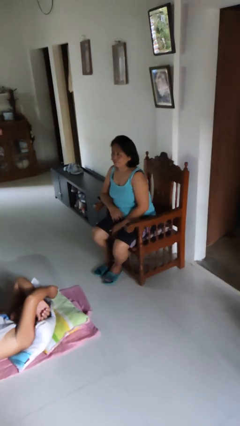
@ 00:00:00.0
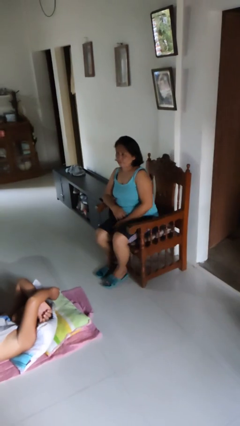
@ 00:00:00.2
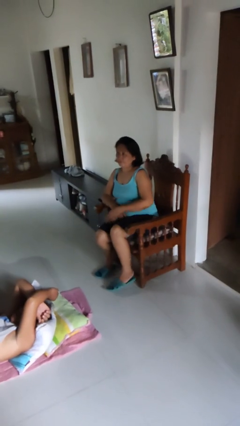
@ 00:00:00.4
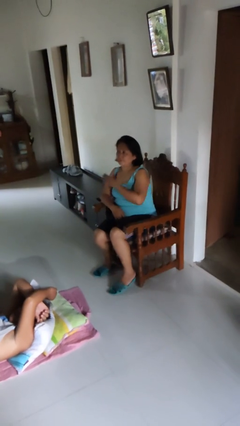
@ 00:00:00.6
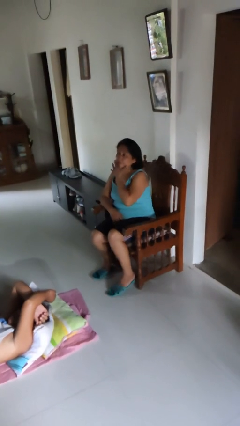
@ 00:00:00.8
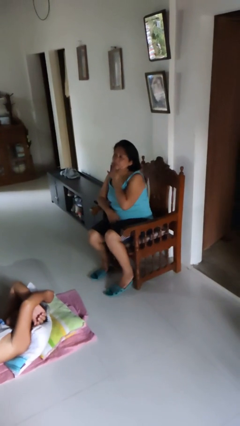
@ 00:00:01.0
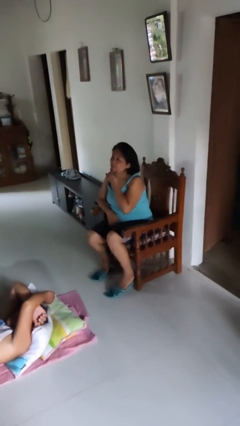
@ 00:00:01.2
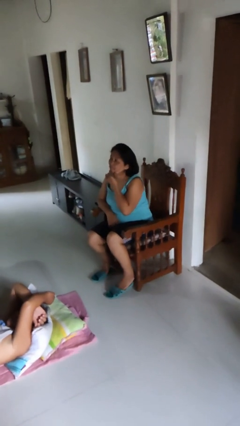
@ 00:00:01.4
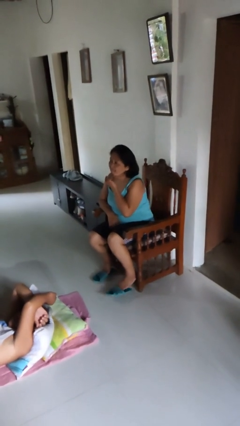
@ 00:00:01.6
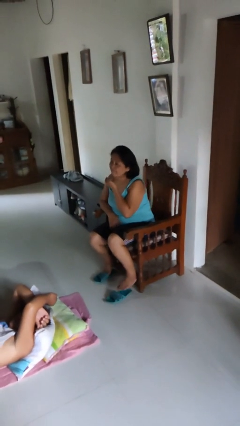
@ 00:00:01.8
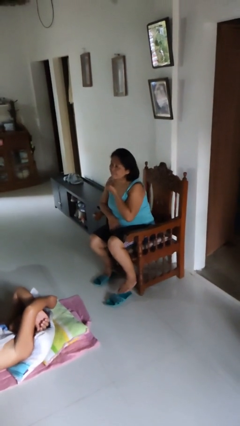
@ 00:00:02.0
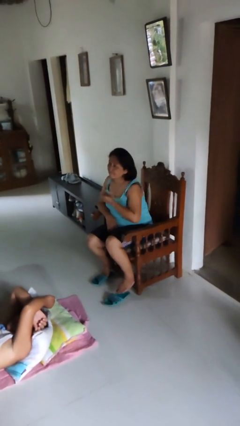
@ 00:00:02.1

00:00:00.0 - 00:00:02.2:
person strokes chin

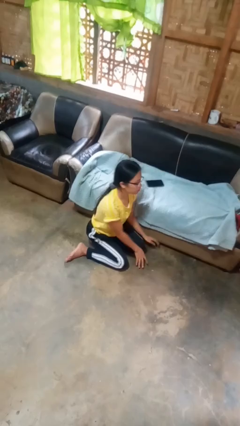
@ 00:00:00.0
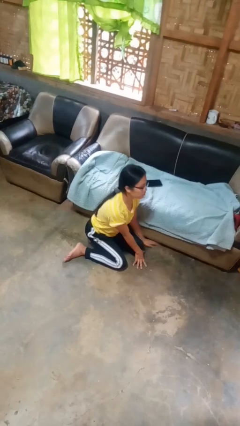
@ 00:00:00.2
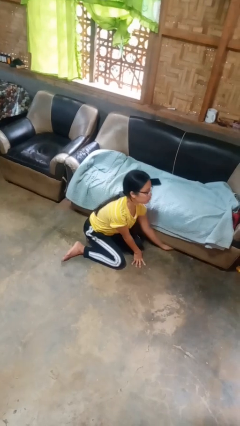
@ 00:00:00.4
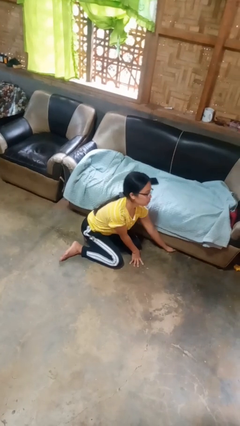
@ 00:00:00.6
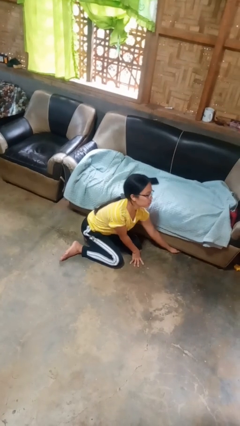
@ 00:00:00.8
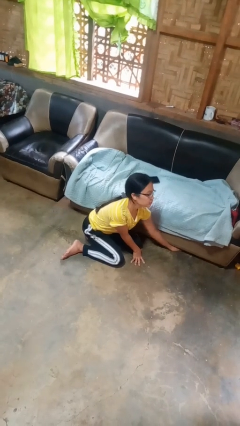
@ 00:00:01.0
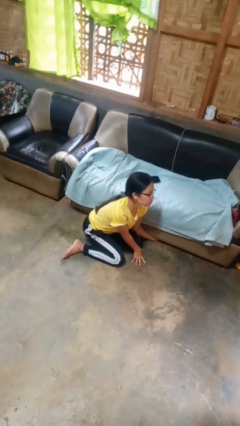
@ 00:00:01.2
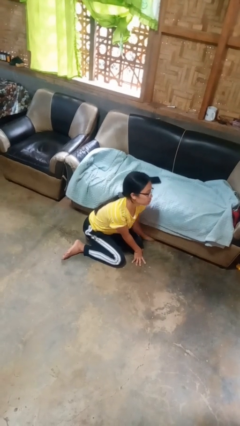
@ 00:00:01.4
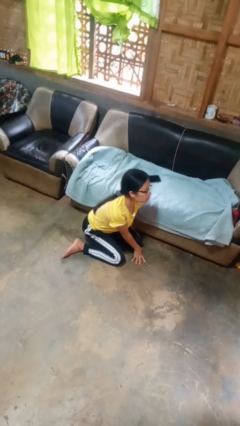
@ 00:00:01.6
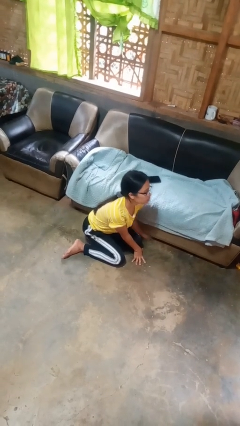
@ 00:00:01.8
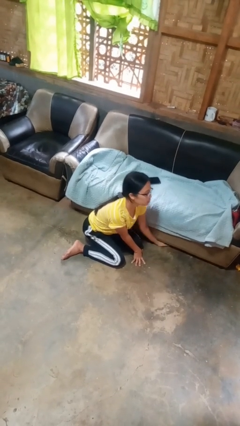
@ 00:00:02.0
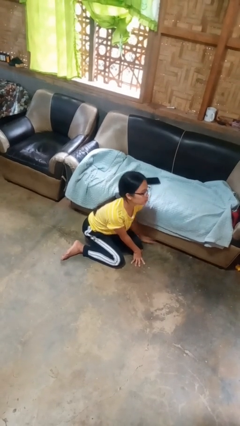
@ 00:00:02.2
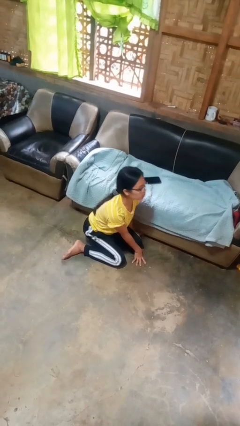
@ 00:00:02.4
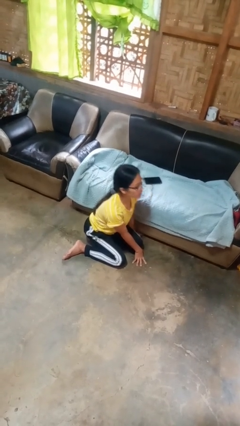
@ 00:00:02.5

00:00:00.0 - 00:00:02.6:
person searches under couch

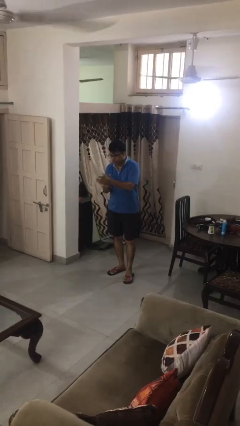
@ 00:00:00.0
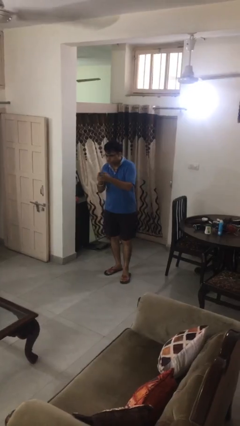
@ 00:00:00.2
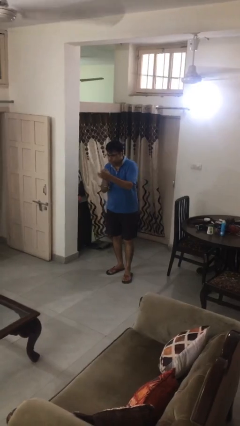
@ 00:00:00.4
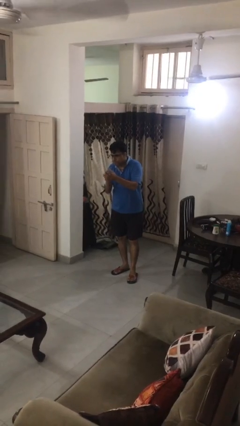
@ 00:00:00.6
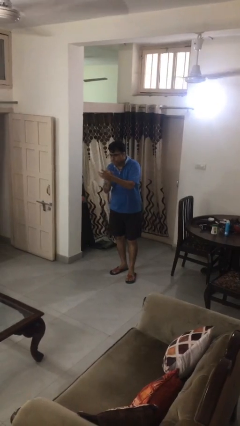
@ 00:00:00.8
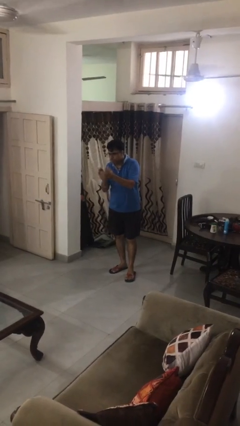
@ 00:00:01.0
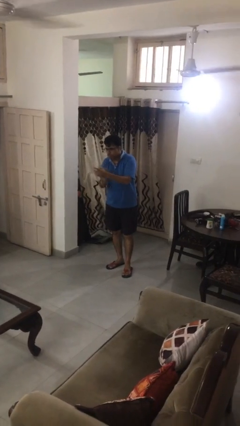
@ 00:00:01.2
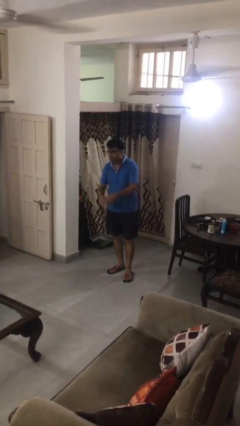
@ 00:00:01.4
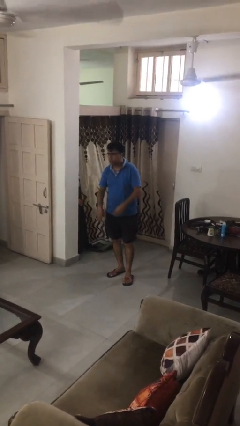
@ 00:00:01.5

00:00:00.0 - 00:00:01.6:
person claps hands

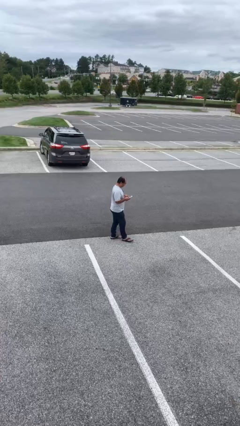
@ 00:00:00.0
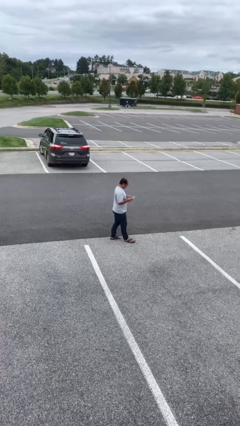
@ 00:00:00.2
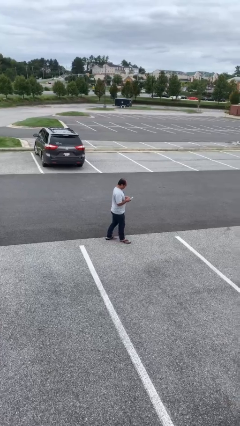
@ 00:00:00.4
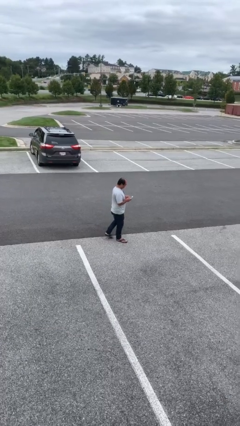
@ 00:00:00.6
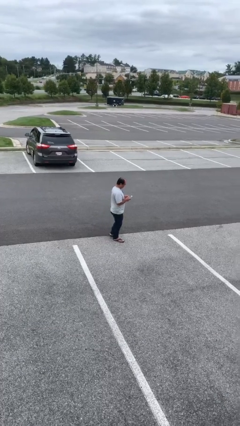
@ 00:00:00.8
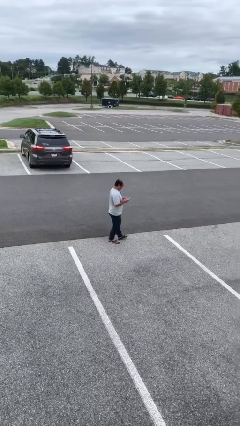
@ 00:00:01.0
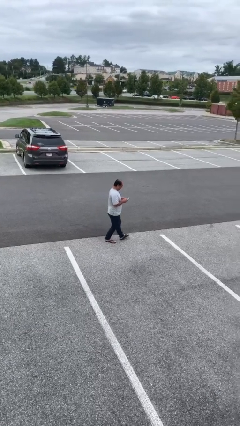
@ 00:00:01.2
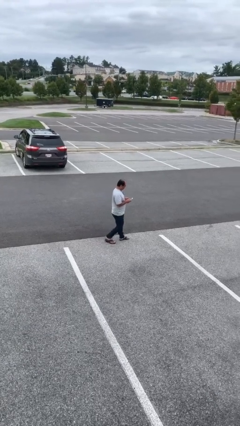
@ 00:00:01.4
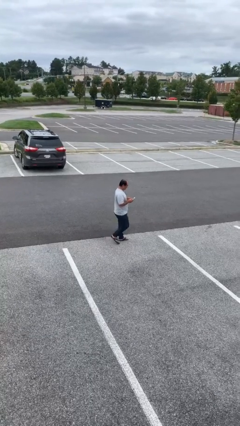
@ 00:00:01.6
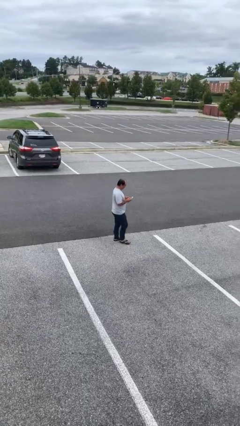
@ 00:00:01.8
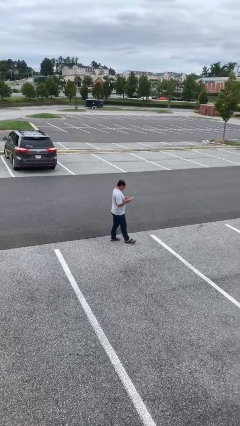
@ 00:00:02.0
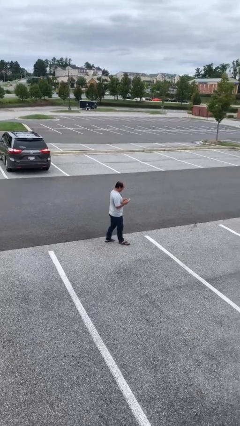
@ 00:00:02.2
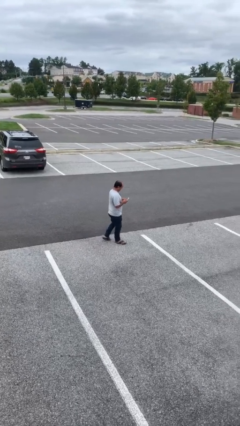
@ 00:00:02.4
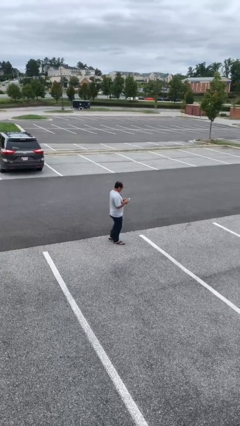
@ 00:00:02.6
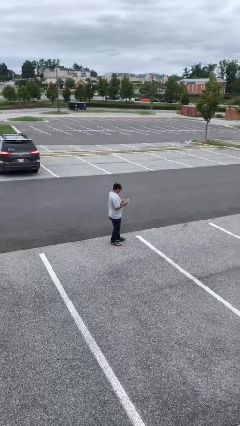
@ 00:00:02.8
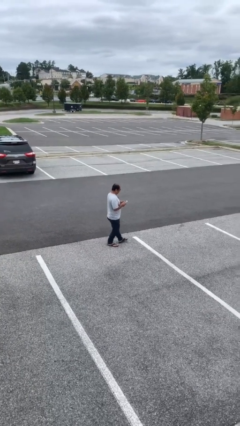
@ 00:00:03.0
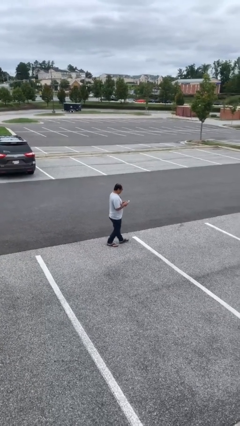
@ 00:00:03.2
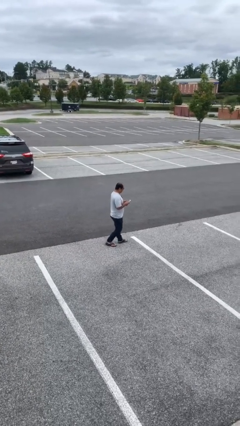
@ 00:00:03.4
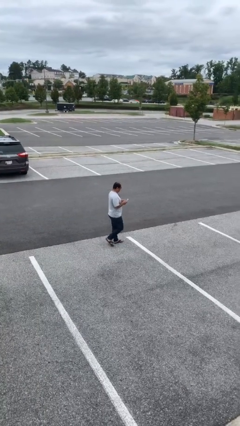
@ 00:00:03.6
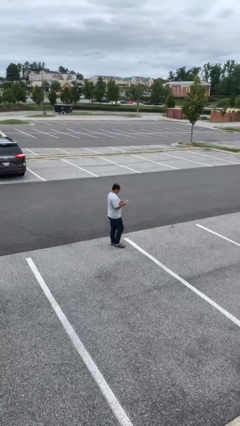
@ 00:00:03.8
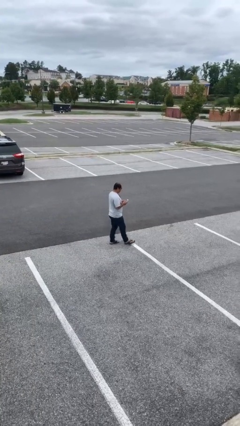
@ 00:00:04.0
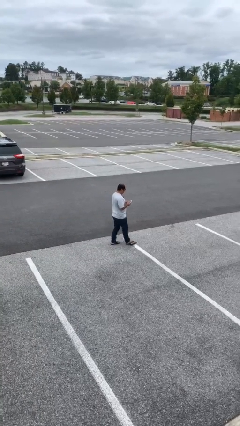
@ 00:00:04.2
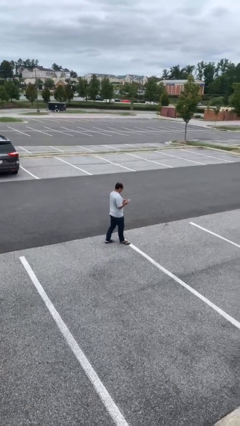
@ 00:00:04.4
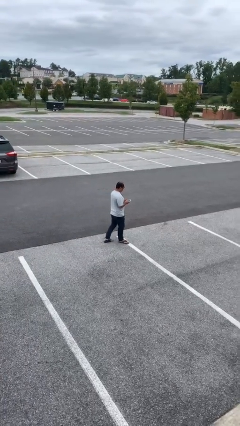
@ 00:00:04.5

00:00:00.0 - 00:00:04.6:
person texts on phone

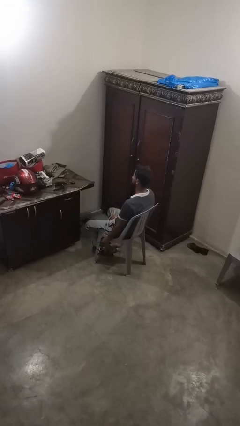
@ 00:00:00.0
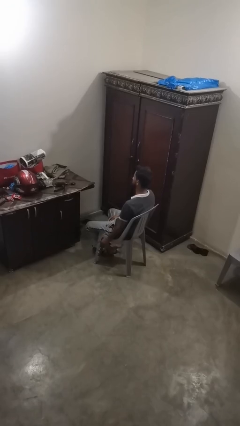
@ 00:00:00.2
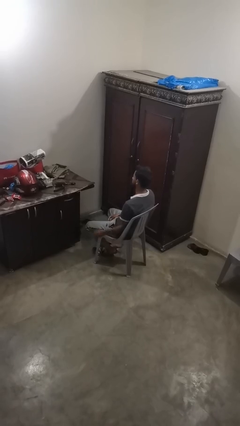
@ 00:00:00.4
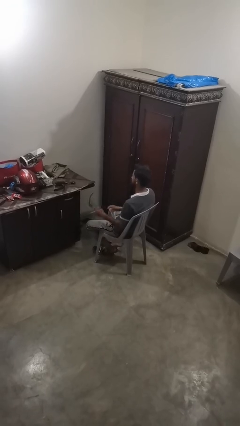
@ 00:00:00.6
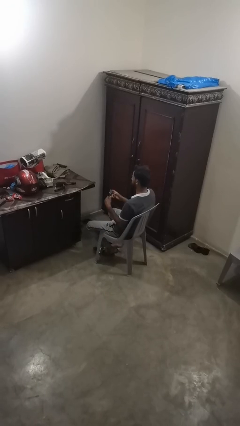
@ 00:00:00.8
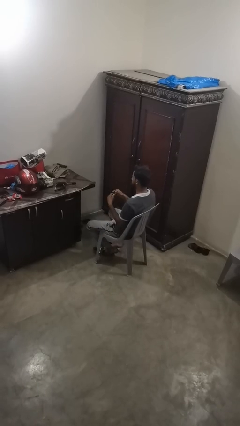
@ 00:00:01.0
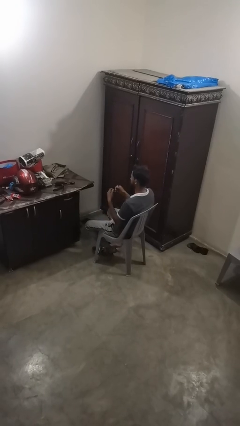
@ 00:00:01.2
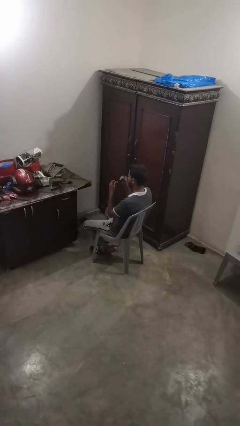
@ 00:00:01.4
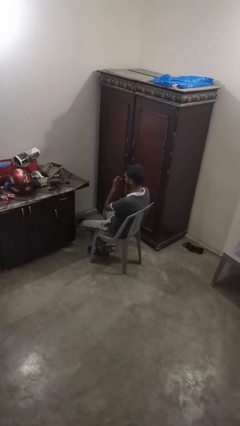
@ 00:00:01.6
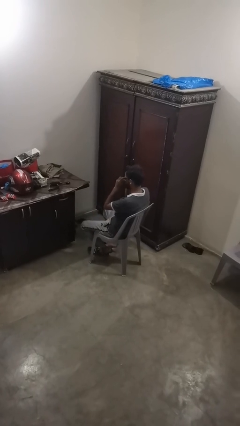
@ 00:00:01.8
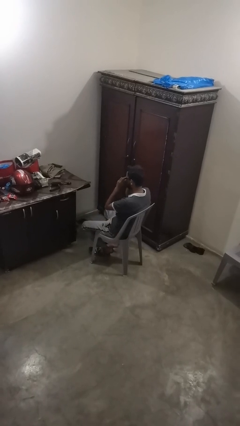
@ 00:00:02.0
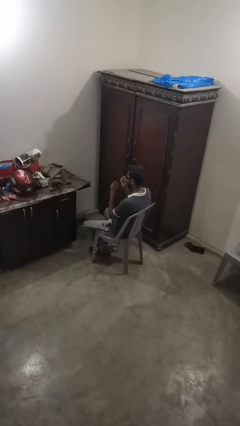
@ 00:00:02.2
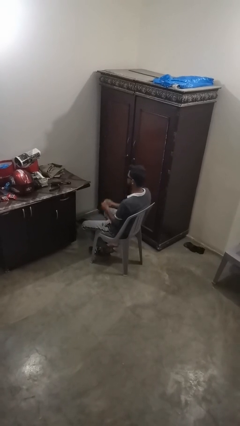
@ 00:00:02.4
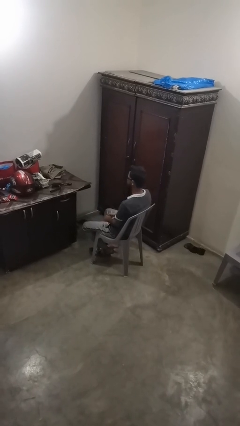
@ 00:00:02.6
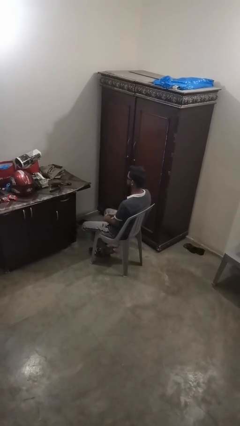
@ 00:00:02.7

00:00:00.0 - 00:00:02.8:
person puts on sunglasses

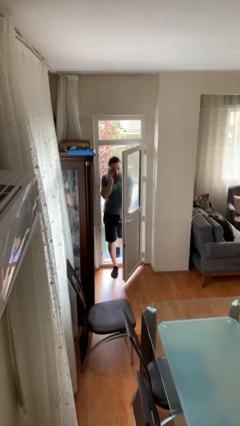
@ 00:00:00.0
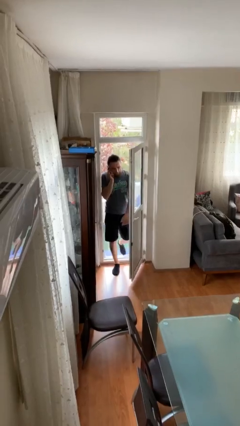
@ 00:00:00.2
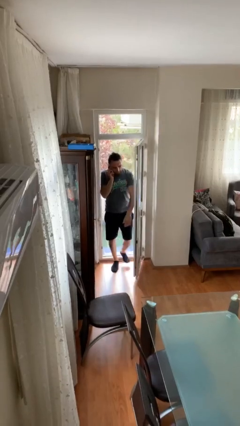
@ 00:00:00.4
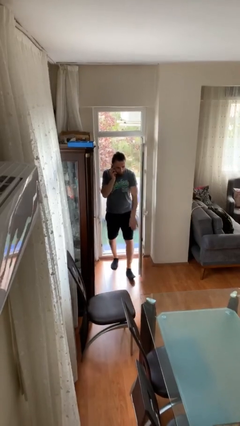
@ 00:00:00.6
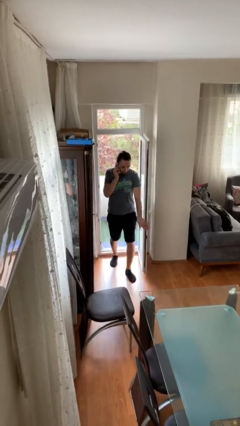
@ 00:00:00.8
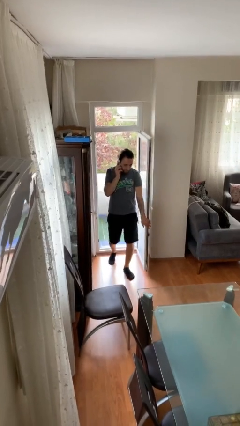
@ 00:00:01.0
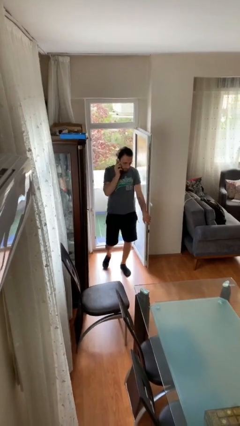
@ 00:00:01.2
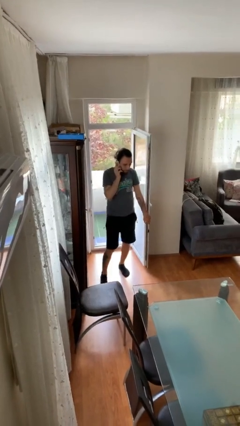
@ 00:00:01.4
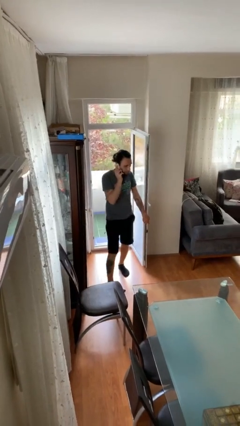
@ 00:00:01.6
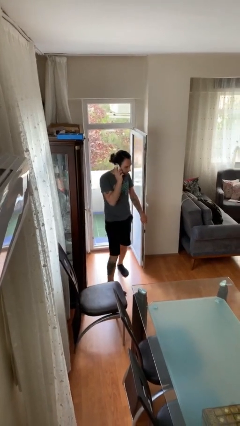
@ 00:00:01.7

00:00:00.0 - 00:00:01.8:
person enters scene through structure

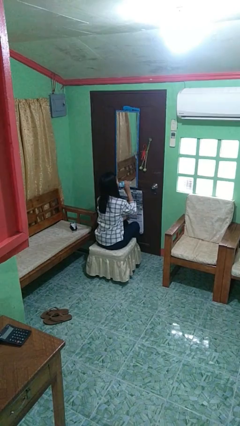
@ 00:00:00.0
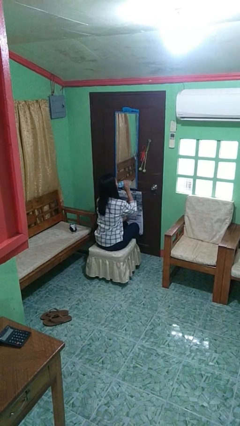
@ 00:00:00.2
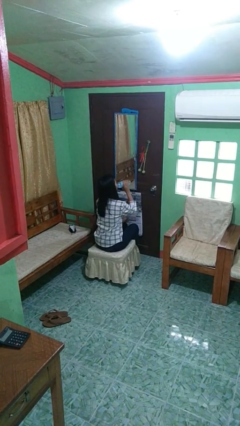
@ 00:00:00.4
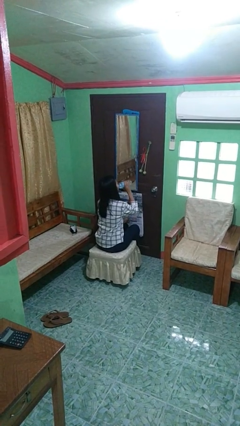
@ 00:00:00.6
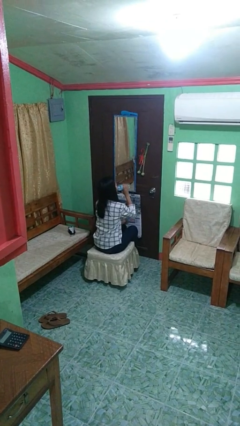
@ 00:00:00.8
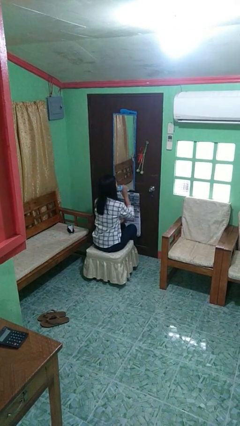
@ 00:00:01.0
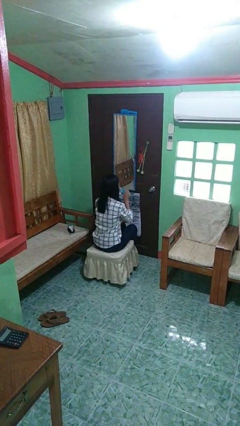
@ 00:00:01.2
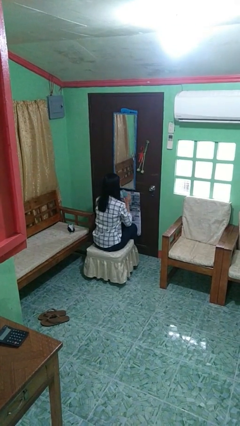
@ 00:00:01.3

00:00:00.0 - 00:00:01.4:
person drinks from bottle
